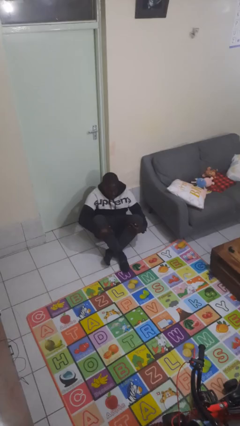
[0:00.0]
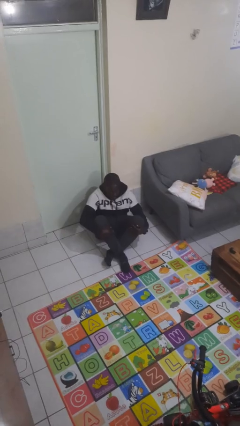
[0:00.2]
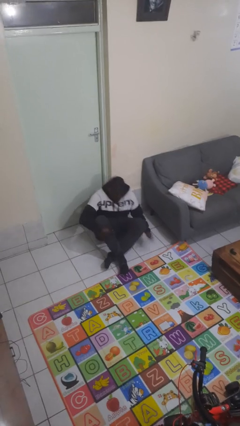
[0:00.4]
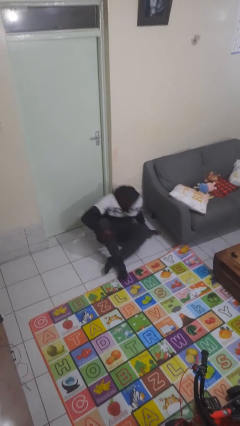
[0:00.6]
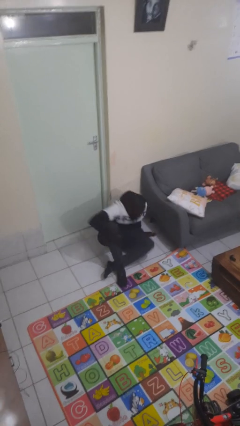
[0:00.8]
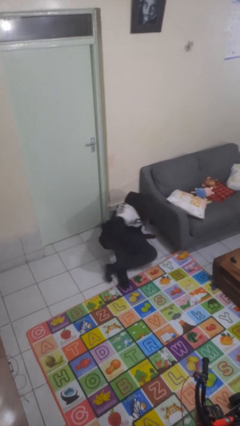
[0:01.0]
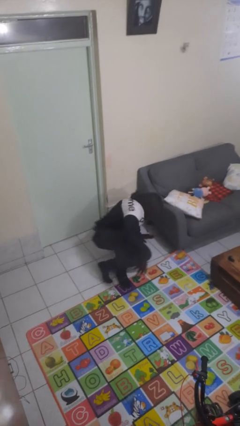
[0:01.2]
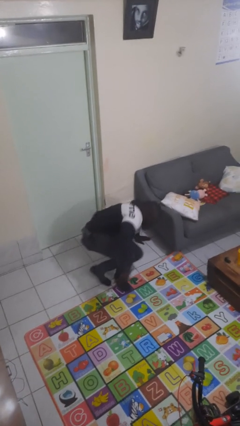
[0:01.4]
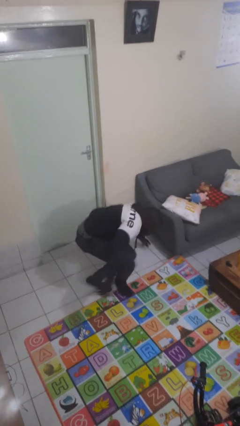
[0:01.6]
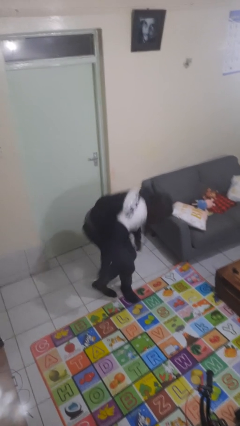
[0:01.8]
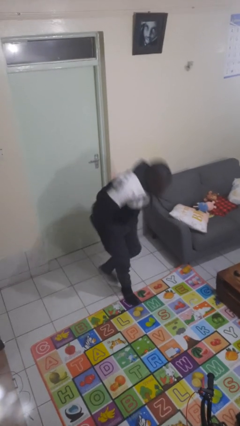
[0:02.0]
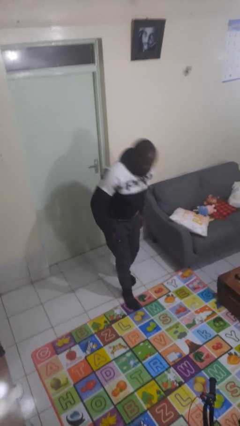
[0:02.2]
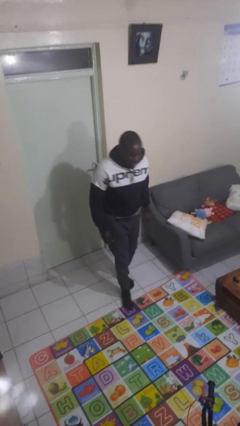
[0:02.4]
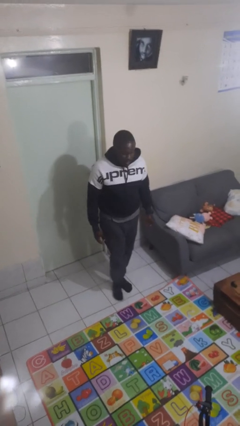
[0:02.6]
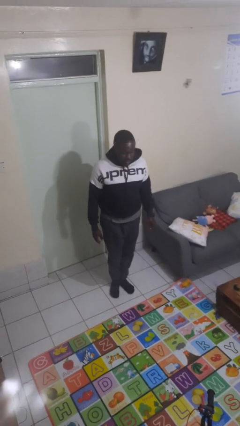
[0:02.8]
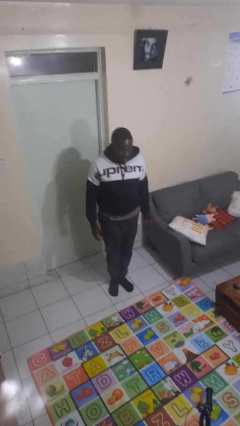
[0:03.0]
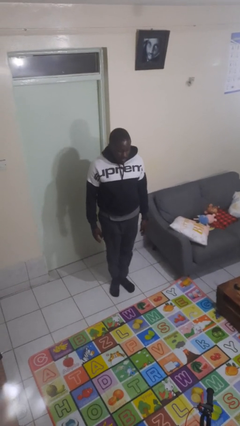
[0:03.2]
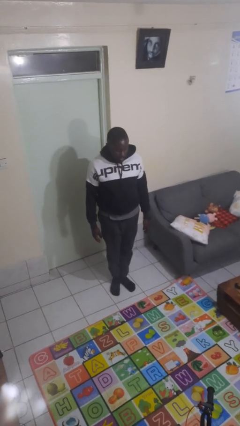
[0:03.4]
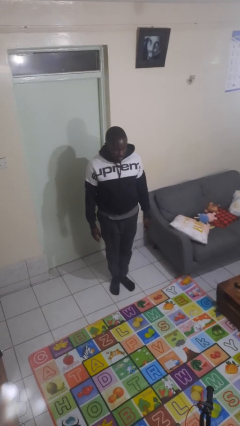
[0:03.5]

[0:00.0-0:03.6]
person stands up from floor

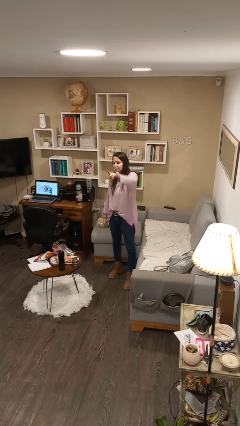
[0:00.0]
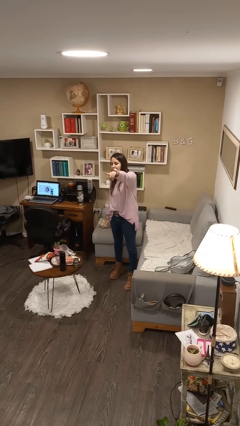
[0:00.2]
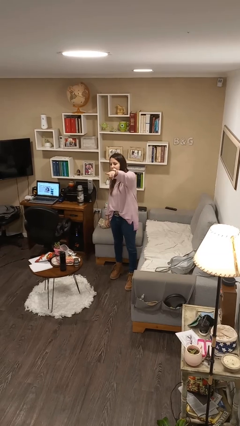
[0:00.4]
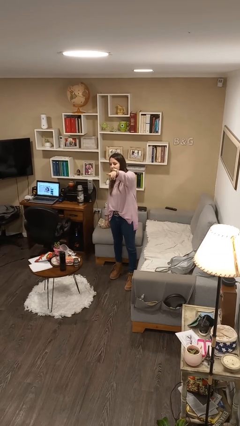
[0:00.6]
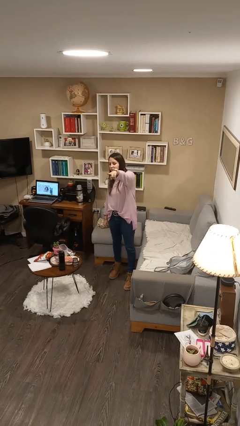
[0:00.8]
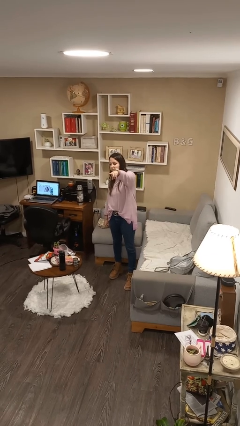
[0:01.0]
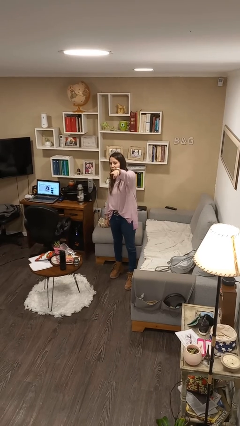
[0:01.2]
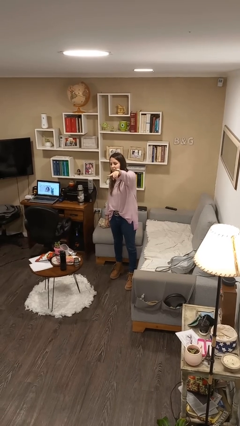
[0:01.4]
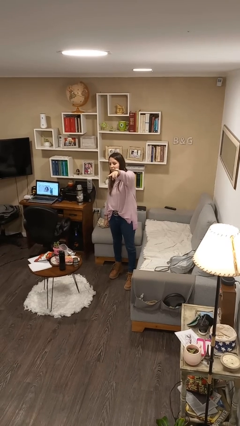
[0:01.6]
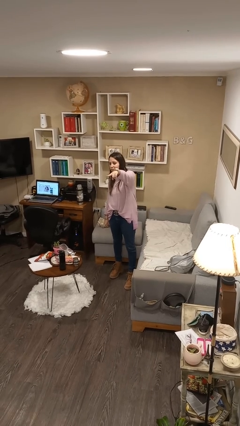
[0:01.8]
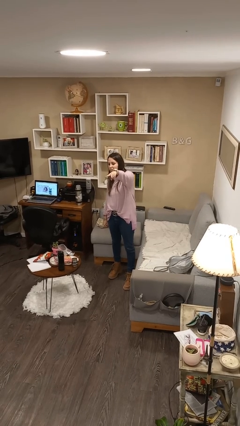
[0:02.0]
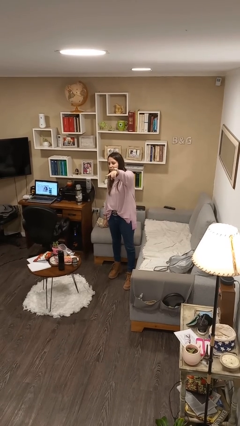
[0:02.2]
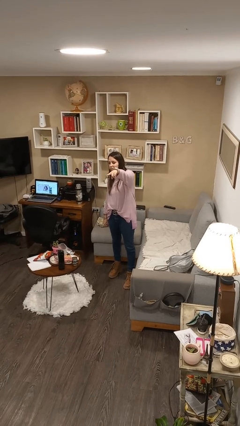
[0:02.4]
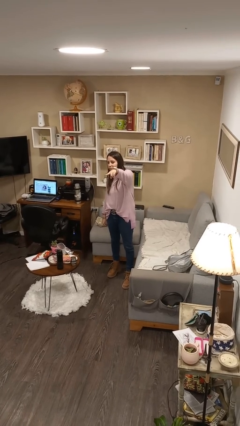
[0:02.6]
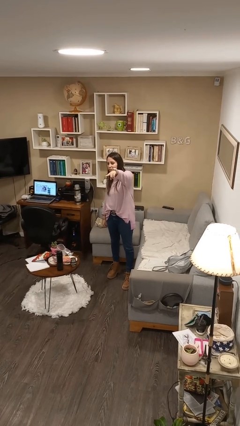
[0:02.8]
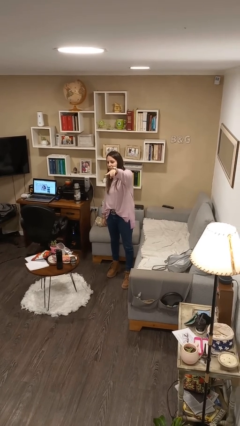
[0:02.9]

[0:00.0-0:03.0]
person points at person

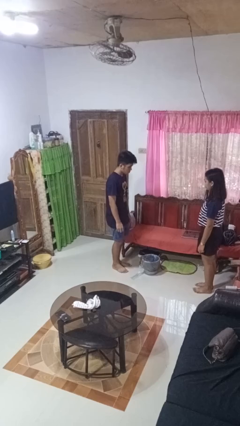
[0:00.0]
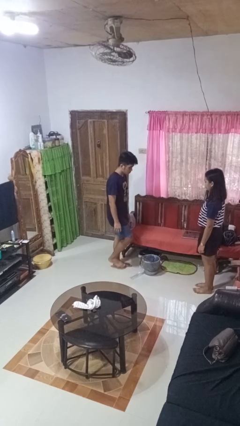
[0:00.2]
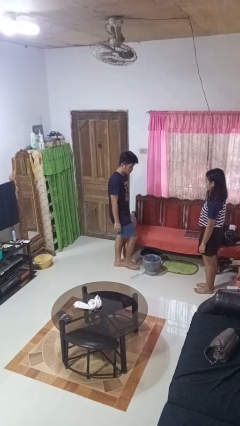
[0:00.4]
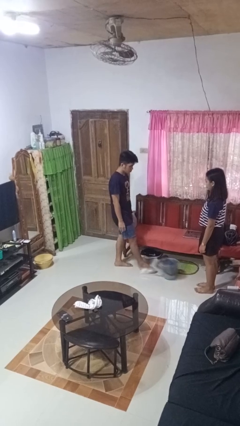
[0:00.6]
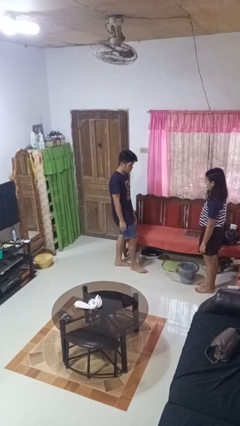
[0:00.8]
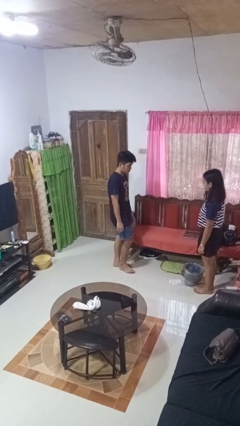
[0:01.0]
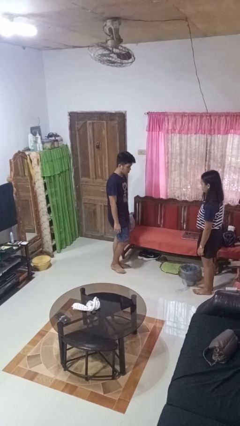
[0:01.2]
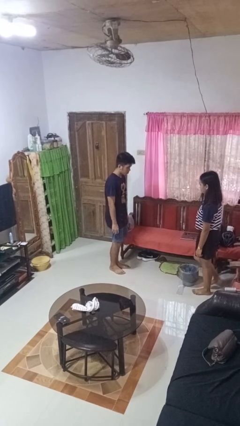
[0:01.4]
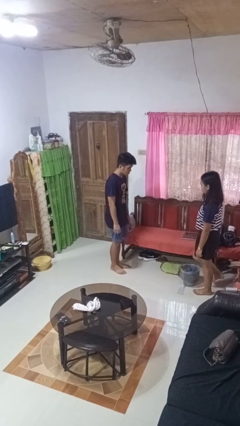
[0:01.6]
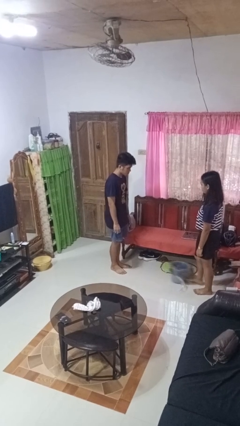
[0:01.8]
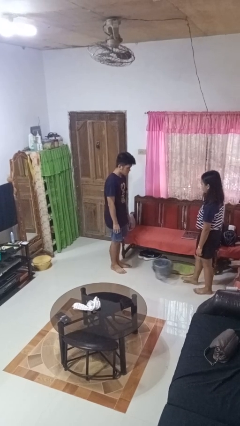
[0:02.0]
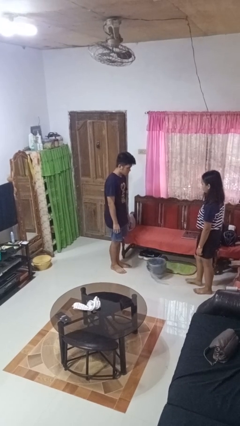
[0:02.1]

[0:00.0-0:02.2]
person kicks object to person

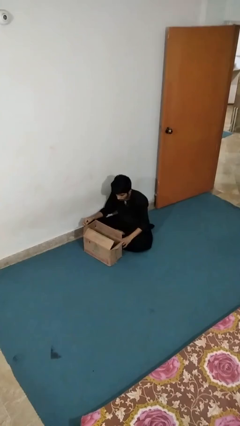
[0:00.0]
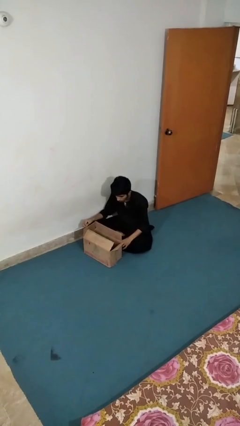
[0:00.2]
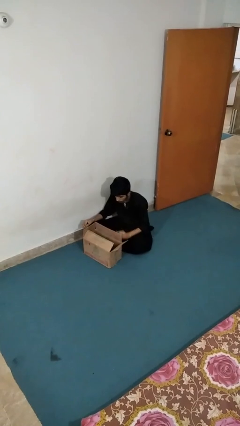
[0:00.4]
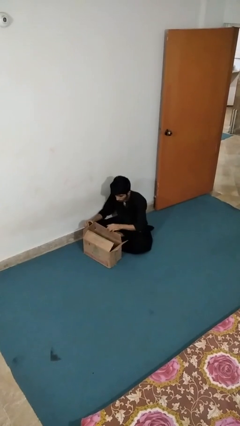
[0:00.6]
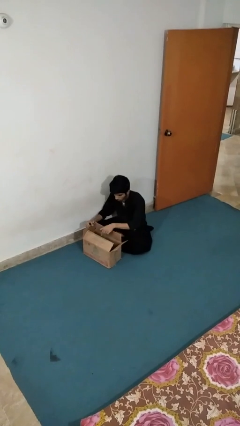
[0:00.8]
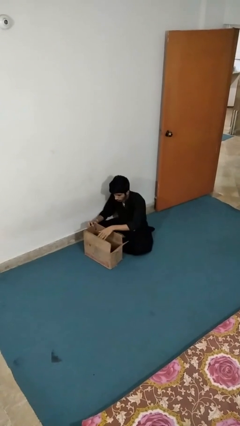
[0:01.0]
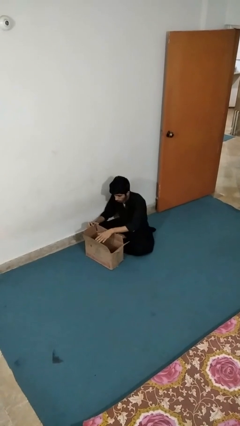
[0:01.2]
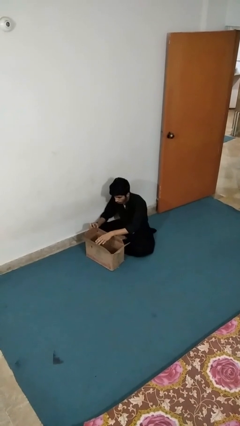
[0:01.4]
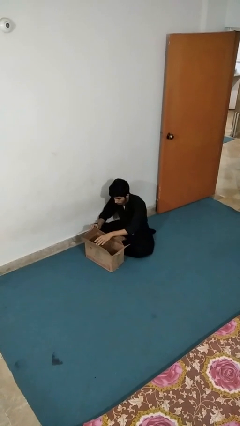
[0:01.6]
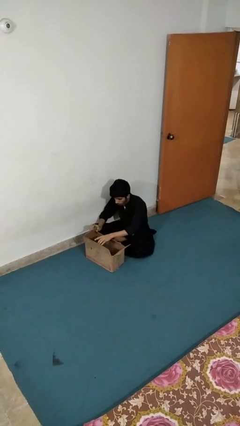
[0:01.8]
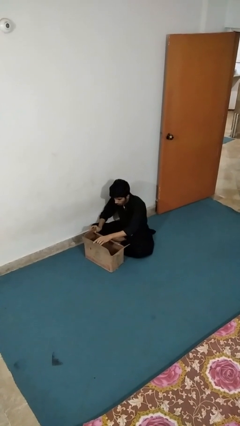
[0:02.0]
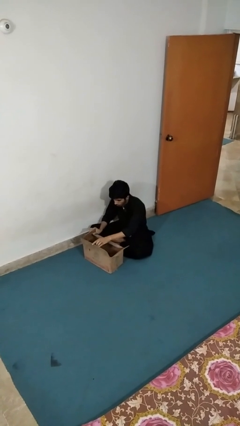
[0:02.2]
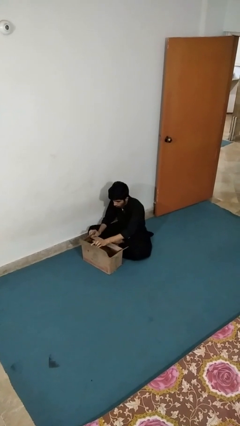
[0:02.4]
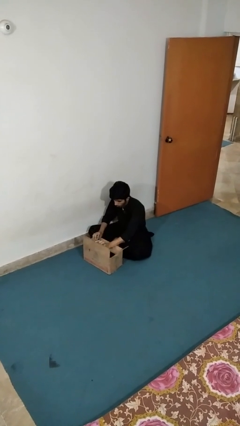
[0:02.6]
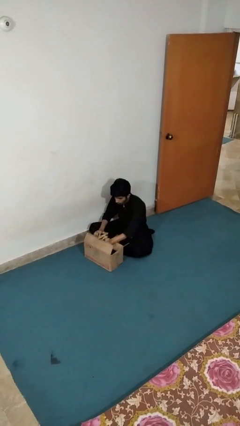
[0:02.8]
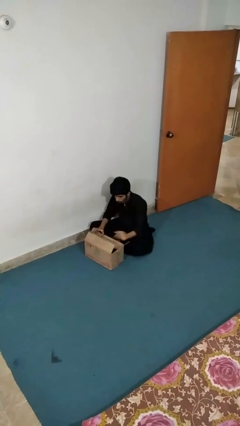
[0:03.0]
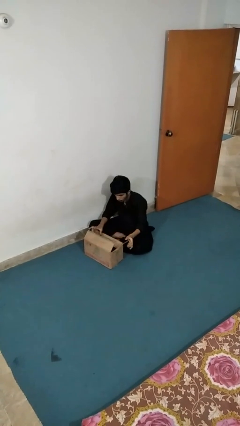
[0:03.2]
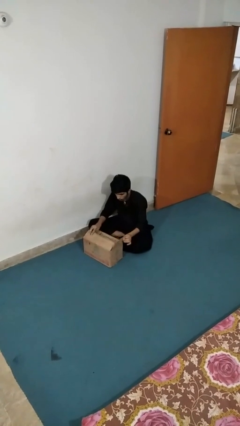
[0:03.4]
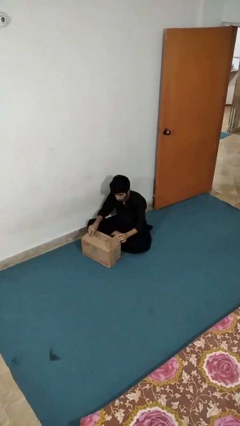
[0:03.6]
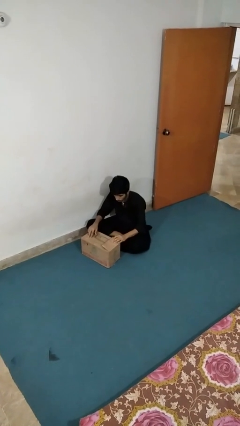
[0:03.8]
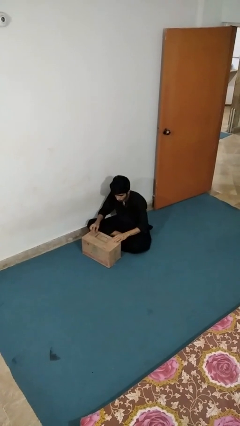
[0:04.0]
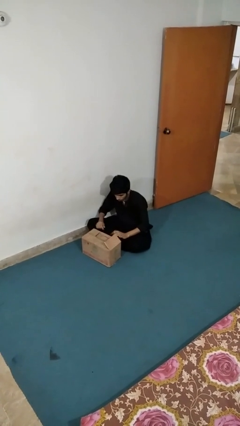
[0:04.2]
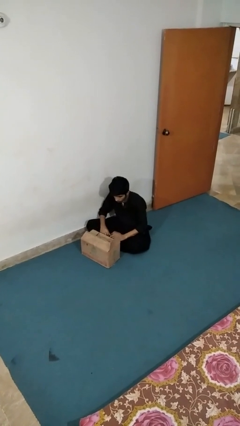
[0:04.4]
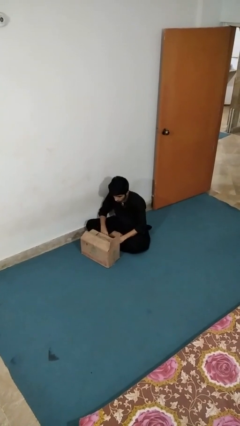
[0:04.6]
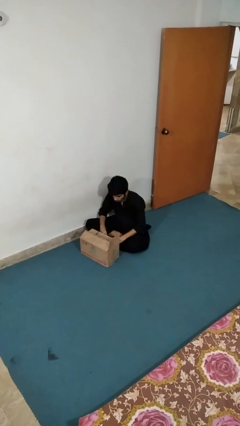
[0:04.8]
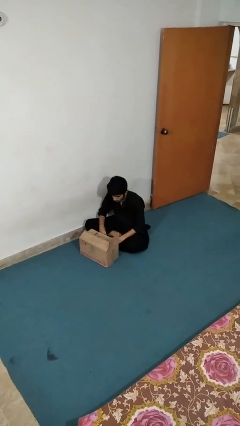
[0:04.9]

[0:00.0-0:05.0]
person closes box

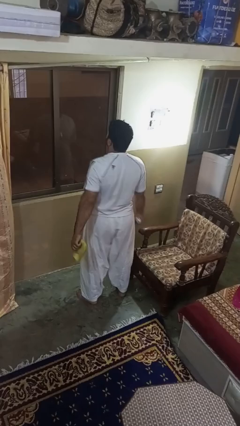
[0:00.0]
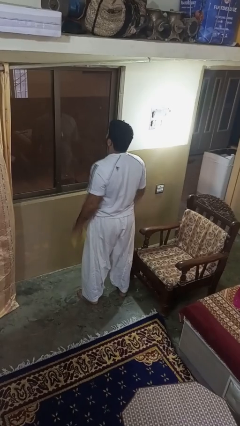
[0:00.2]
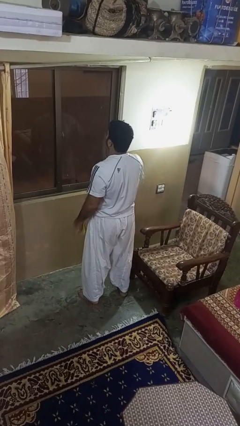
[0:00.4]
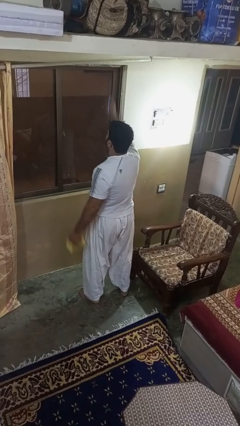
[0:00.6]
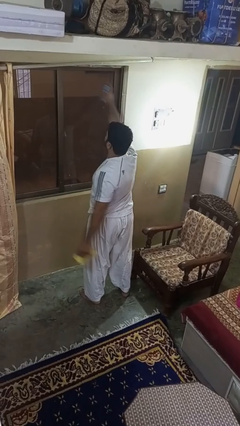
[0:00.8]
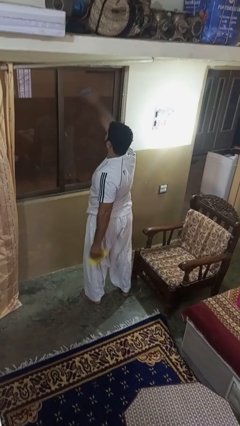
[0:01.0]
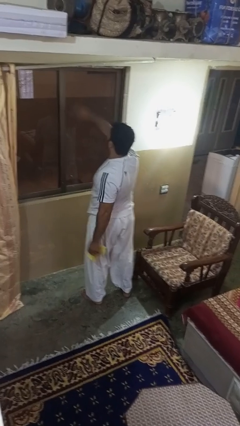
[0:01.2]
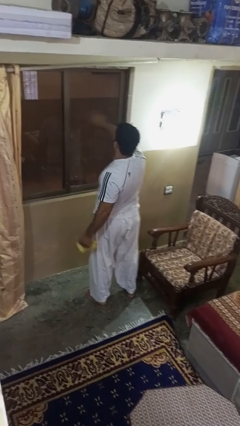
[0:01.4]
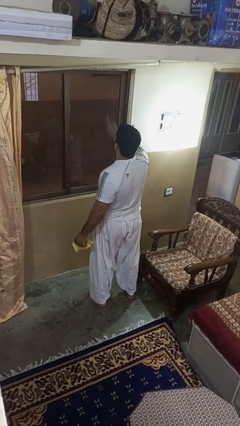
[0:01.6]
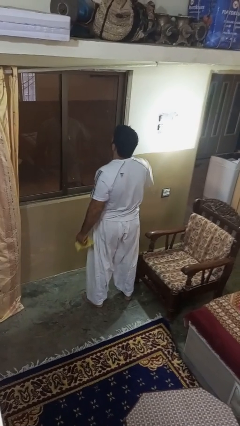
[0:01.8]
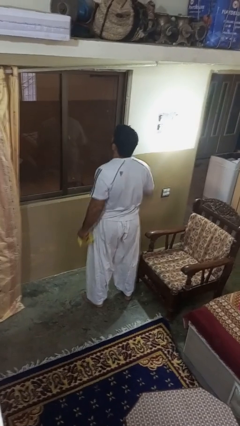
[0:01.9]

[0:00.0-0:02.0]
person sprays from bottle

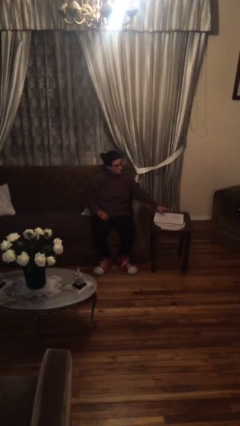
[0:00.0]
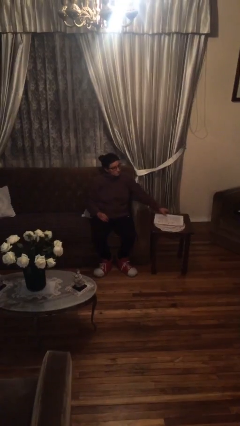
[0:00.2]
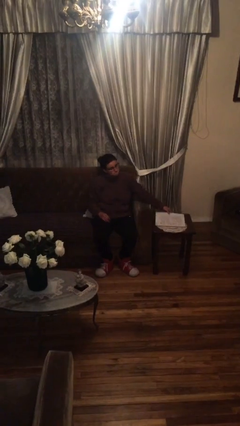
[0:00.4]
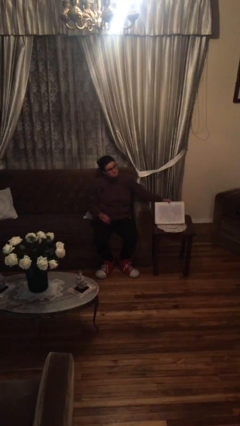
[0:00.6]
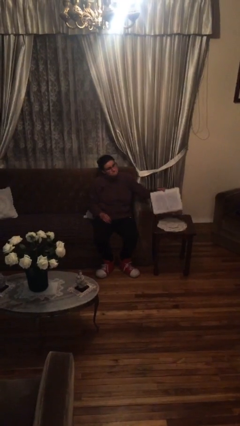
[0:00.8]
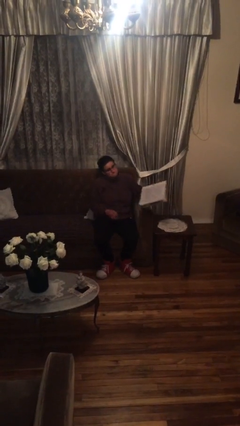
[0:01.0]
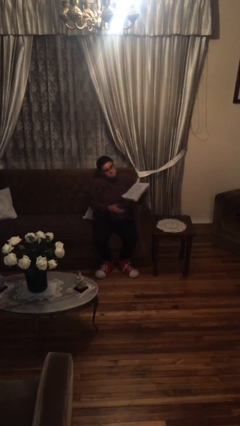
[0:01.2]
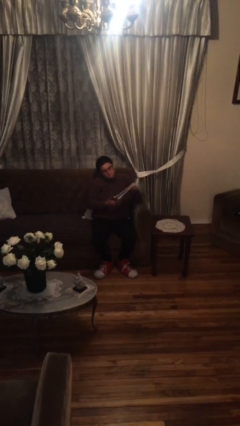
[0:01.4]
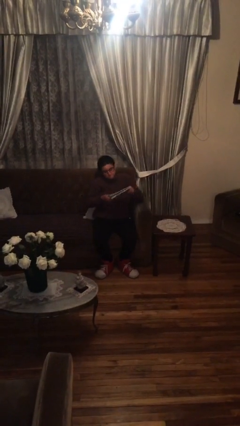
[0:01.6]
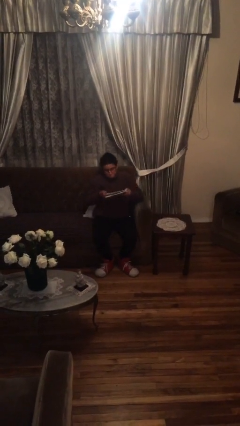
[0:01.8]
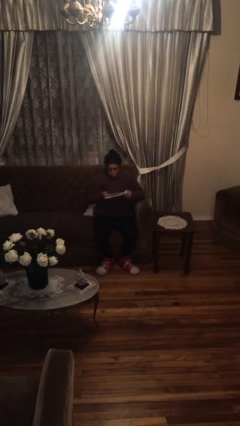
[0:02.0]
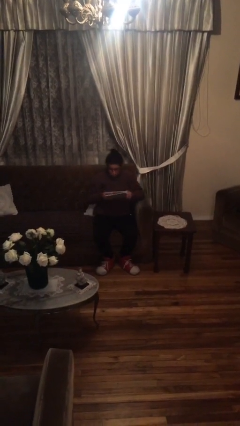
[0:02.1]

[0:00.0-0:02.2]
person picks up object from table
